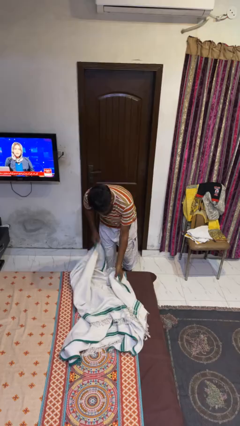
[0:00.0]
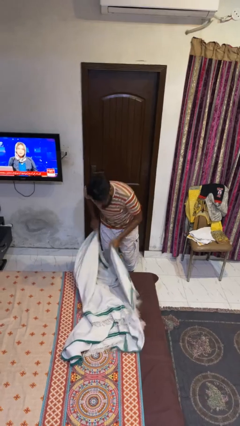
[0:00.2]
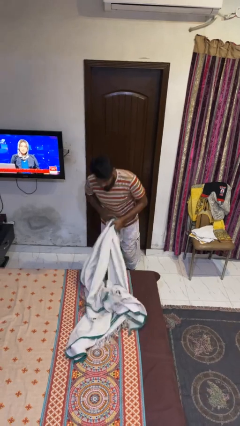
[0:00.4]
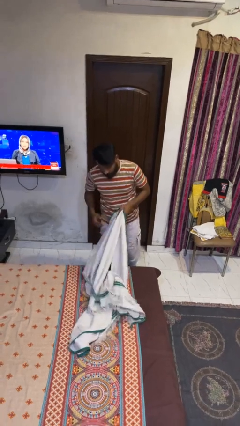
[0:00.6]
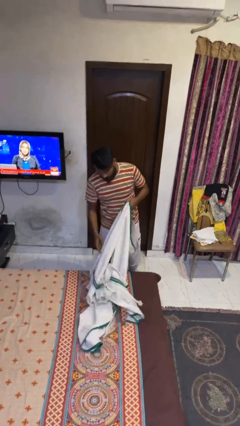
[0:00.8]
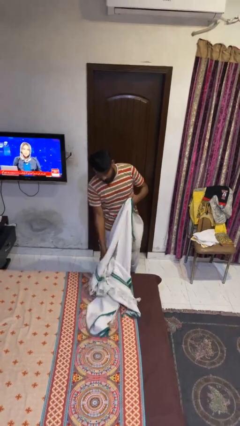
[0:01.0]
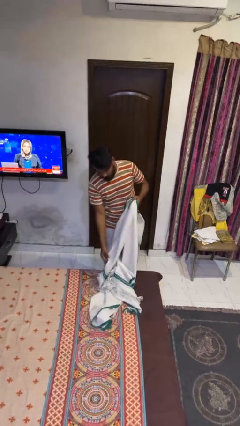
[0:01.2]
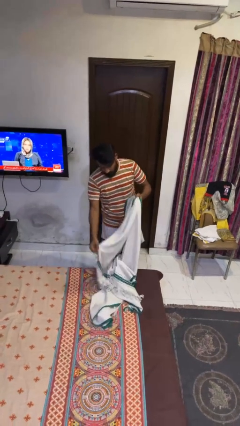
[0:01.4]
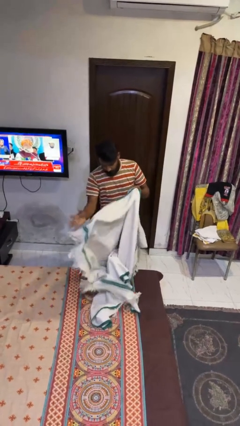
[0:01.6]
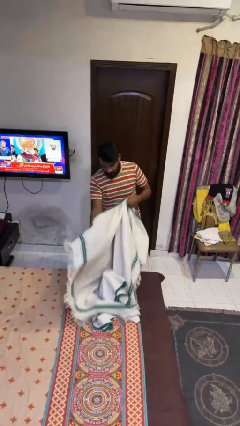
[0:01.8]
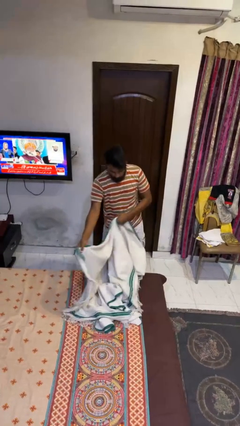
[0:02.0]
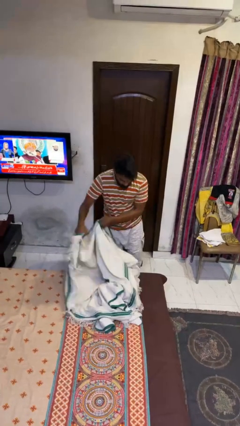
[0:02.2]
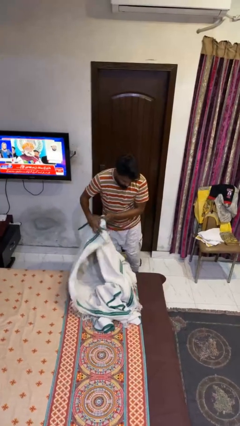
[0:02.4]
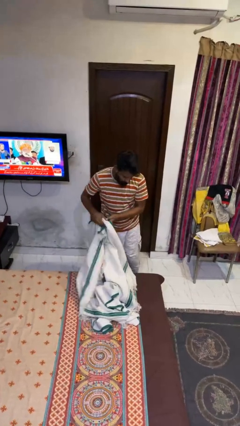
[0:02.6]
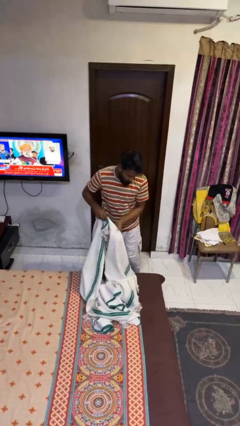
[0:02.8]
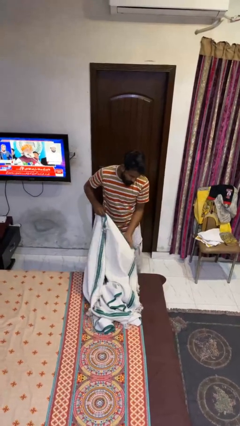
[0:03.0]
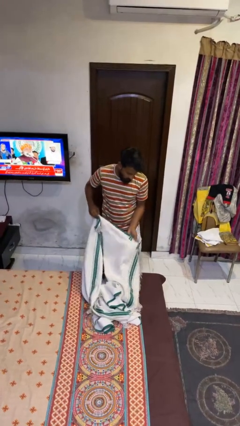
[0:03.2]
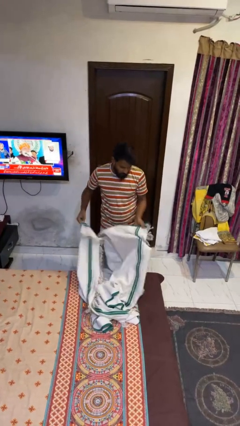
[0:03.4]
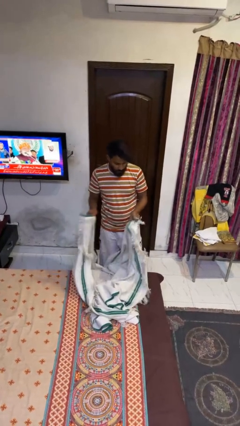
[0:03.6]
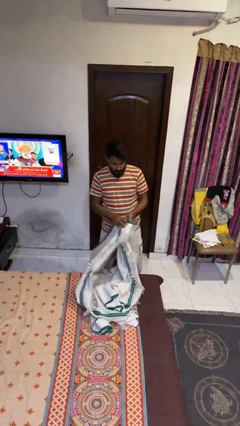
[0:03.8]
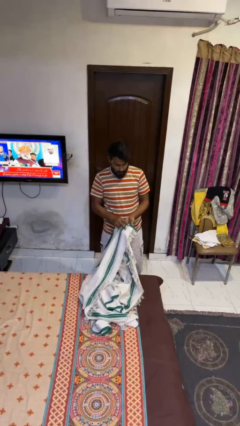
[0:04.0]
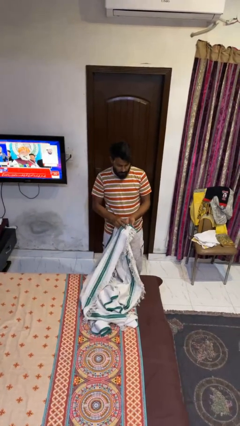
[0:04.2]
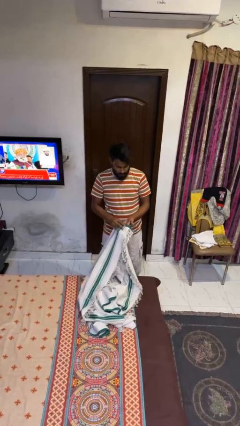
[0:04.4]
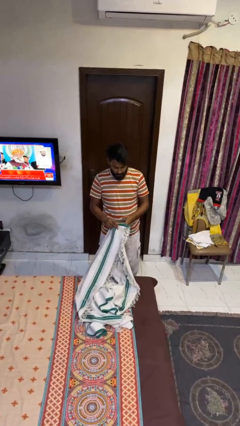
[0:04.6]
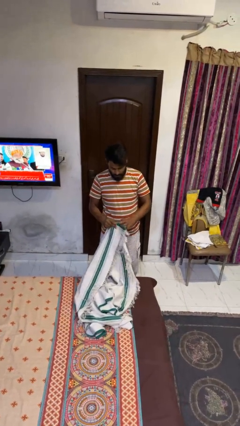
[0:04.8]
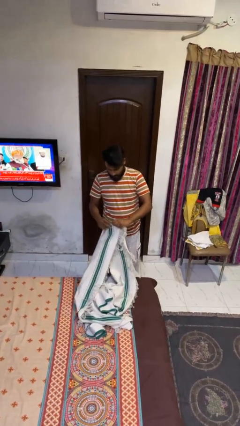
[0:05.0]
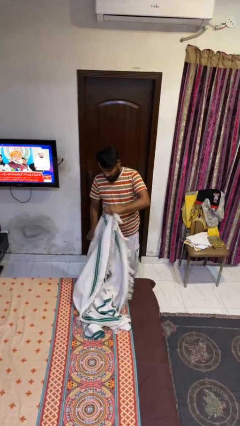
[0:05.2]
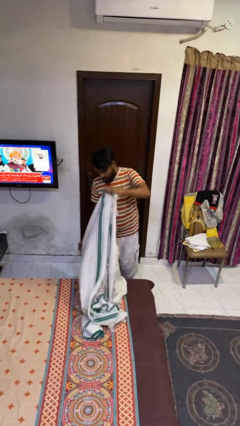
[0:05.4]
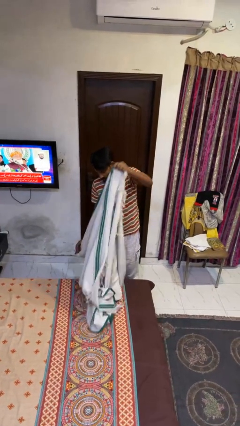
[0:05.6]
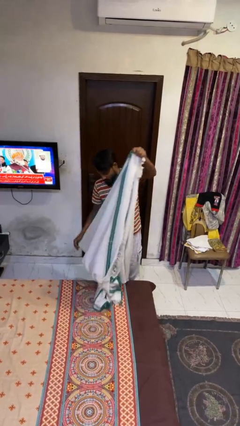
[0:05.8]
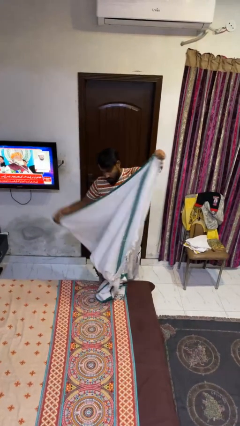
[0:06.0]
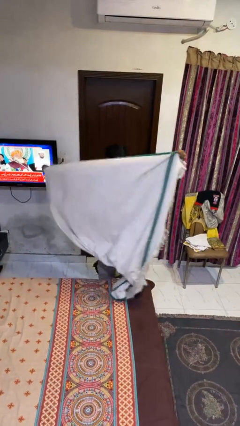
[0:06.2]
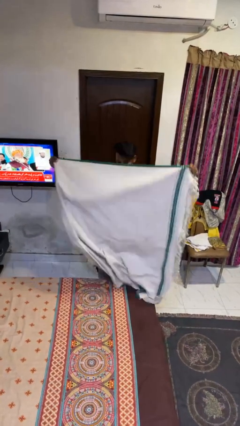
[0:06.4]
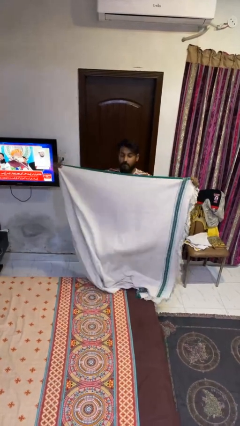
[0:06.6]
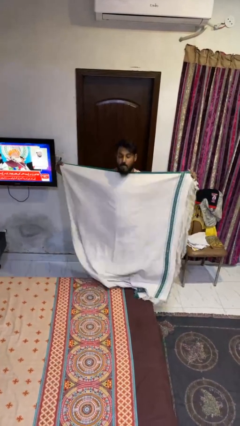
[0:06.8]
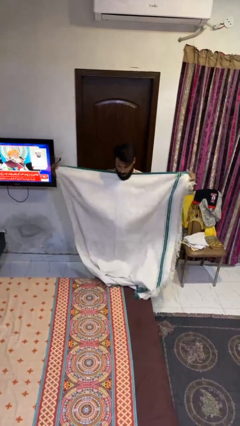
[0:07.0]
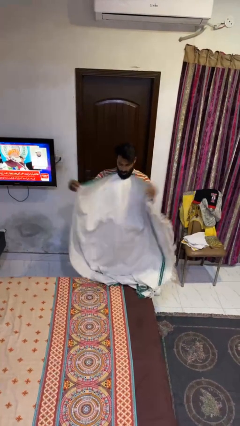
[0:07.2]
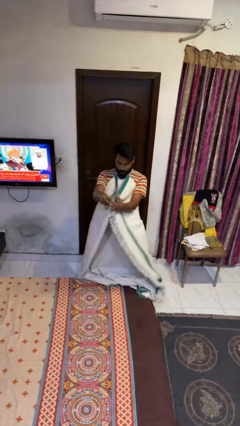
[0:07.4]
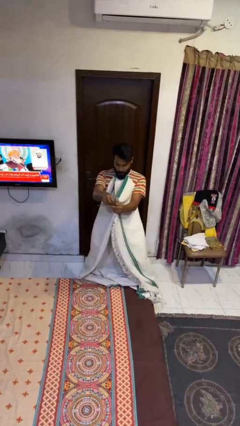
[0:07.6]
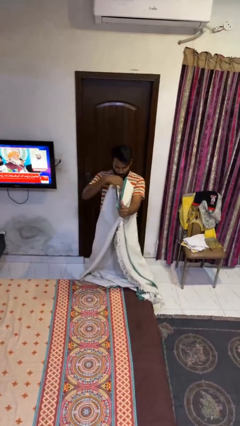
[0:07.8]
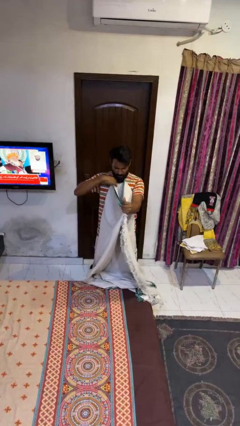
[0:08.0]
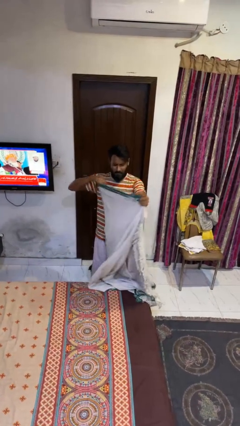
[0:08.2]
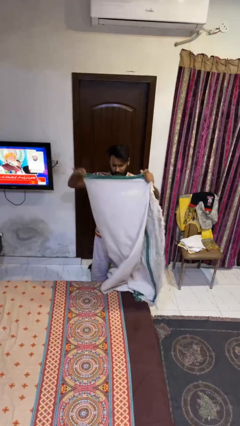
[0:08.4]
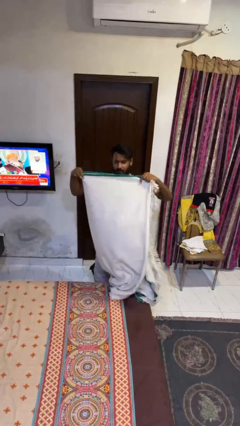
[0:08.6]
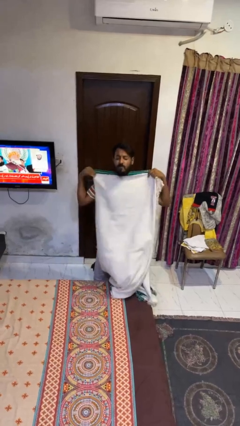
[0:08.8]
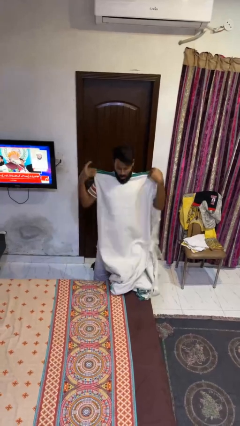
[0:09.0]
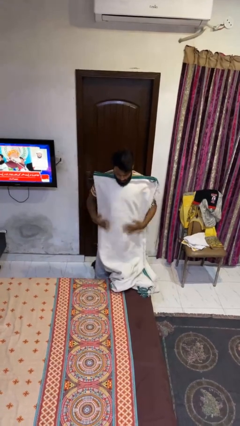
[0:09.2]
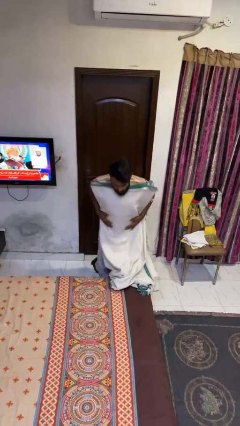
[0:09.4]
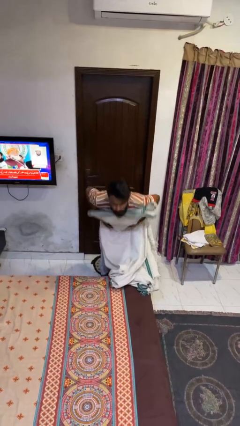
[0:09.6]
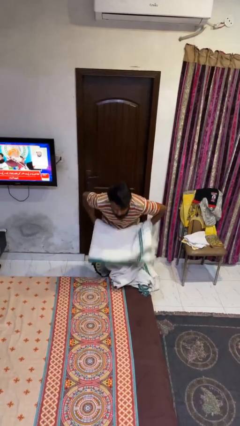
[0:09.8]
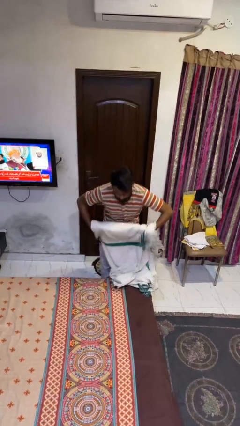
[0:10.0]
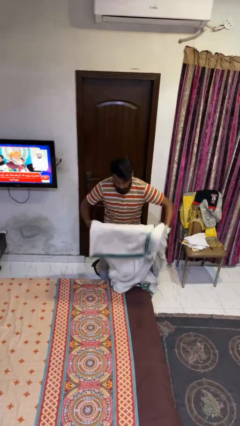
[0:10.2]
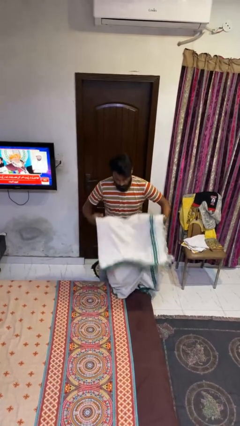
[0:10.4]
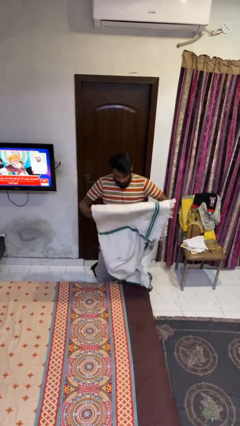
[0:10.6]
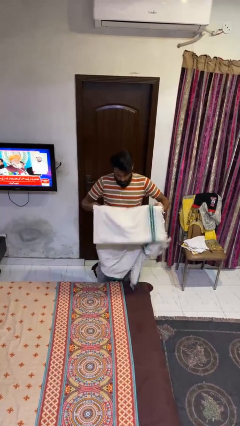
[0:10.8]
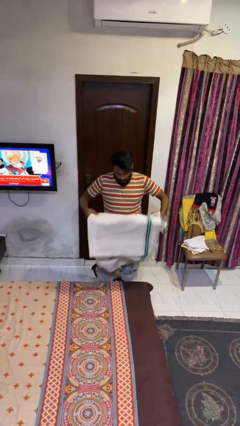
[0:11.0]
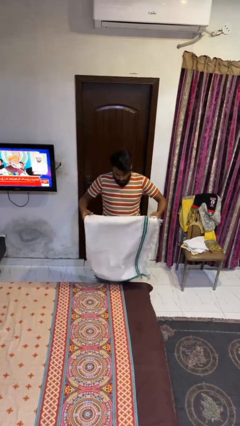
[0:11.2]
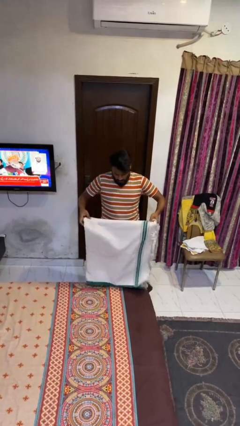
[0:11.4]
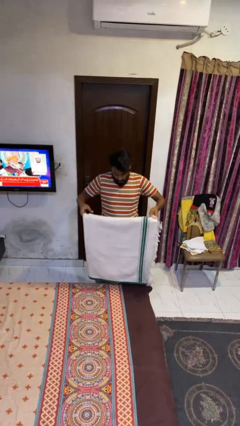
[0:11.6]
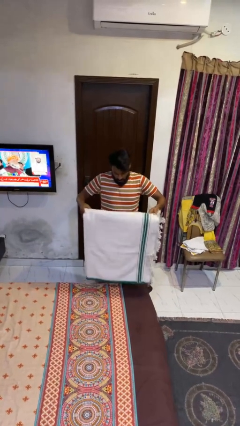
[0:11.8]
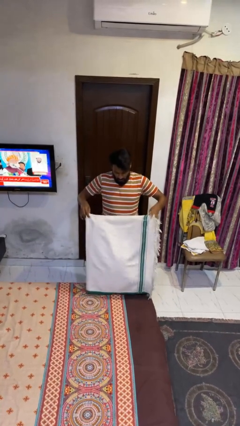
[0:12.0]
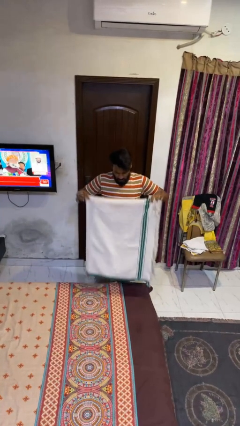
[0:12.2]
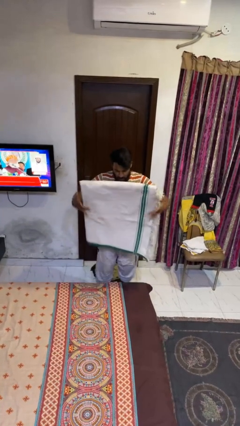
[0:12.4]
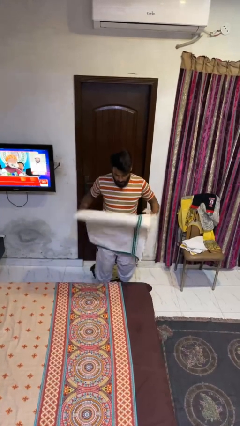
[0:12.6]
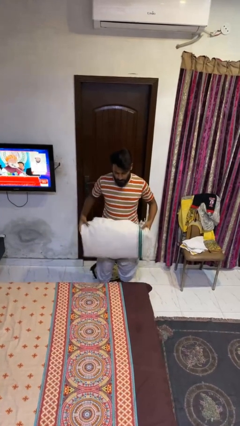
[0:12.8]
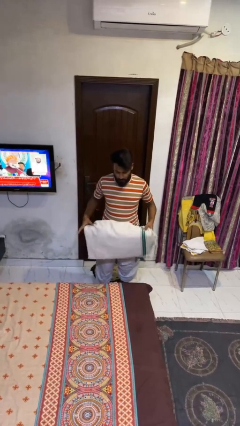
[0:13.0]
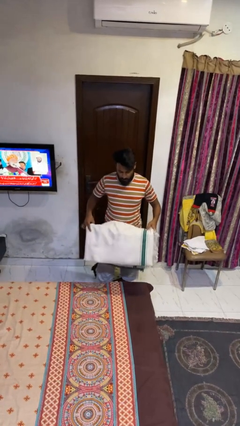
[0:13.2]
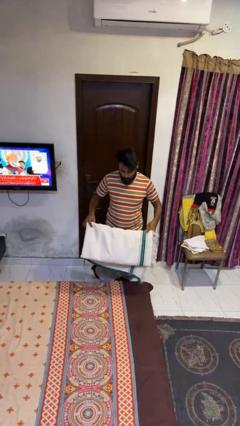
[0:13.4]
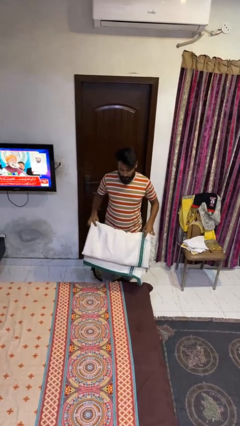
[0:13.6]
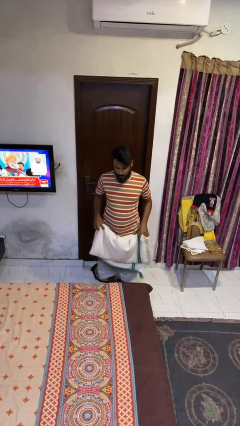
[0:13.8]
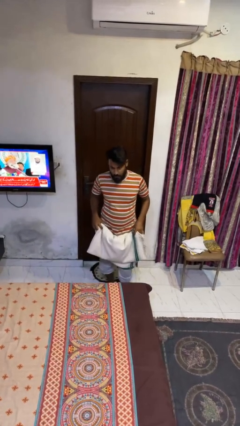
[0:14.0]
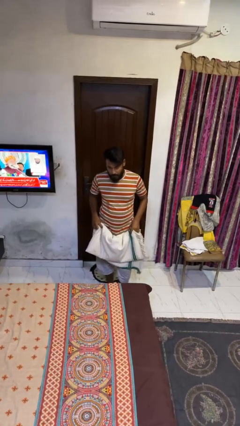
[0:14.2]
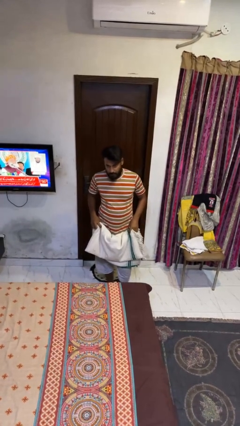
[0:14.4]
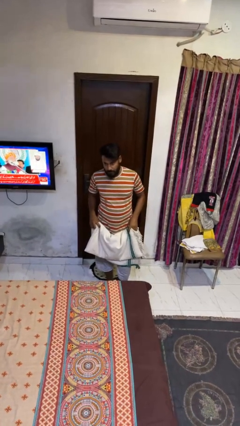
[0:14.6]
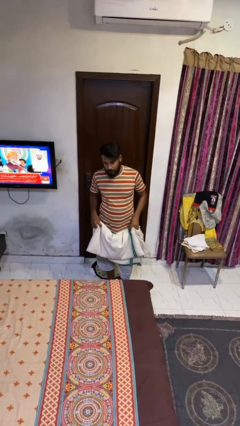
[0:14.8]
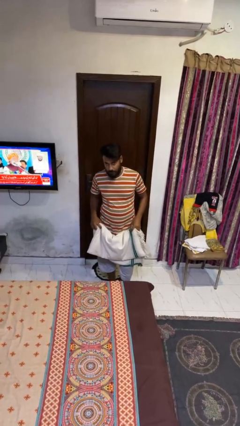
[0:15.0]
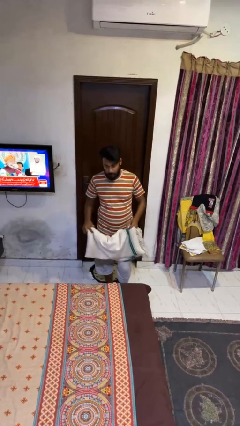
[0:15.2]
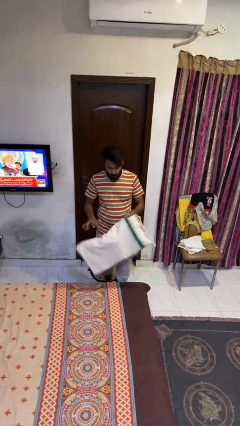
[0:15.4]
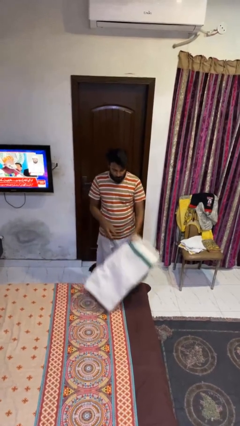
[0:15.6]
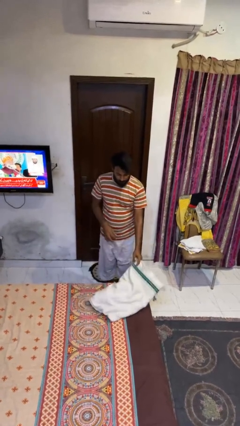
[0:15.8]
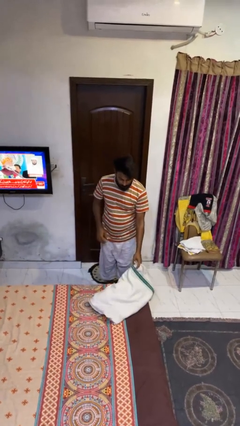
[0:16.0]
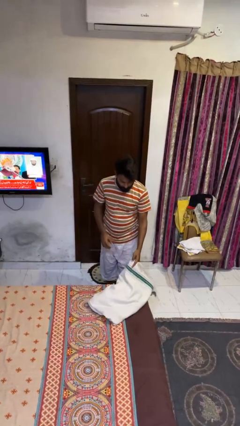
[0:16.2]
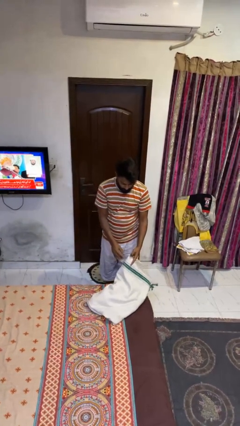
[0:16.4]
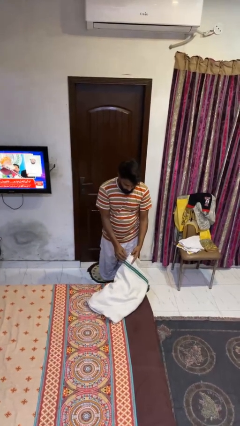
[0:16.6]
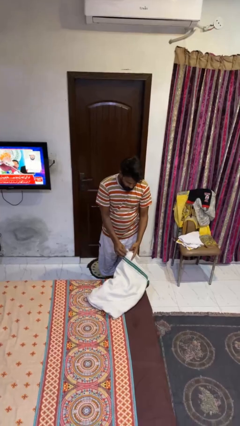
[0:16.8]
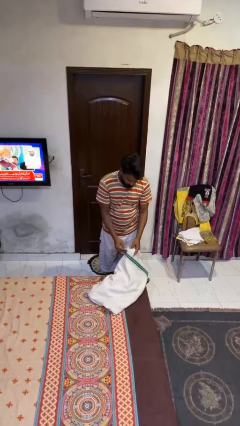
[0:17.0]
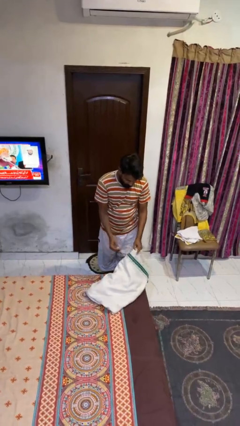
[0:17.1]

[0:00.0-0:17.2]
person folds blanket

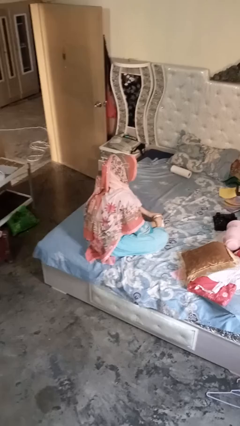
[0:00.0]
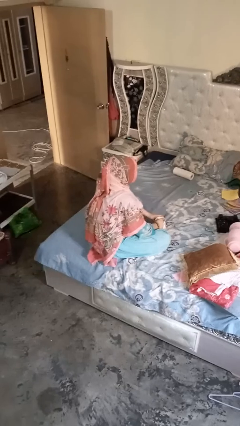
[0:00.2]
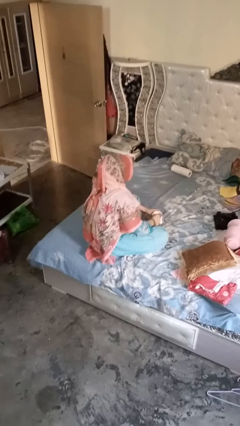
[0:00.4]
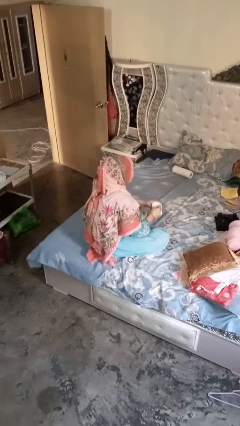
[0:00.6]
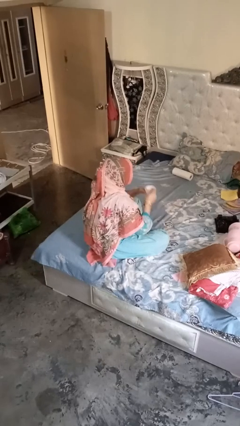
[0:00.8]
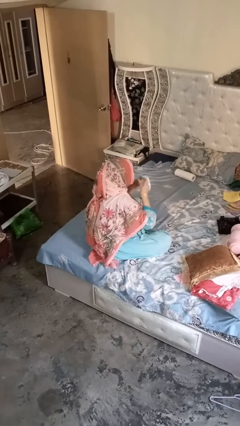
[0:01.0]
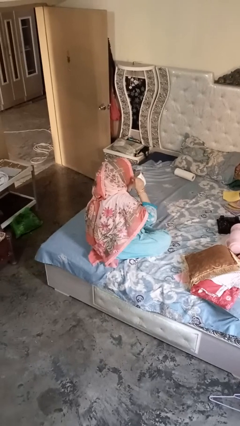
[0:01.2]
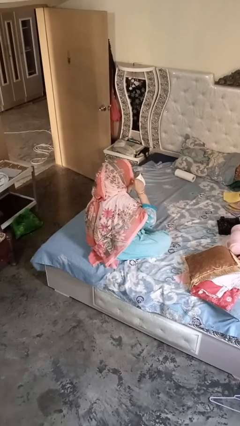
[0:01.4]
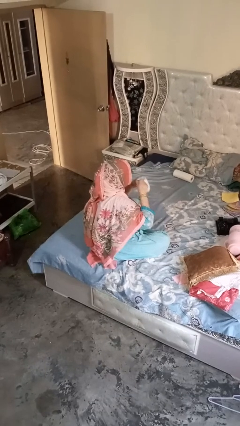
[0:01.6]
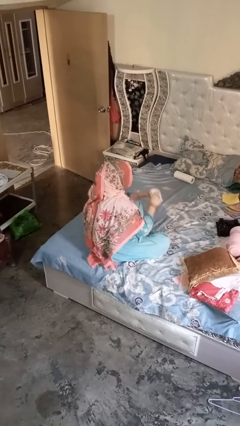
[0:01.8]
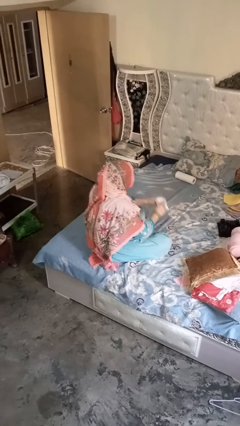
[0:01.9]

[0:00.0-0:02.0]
person drinks from mug
